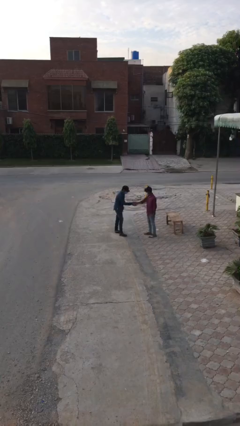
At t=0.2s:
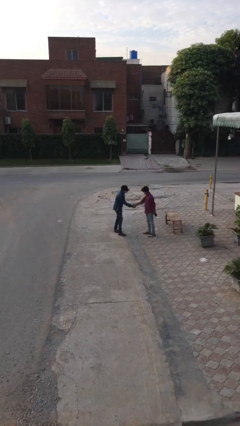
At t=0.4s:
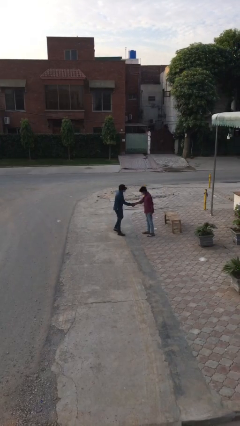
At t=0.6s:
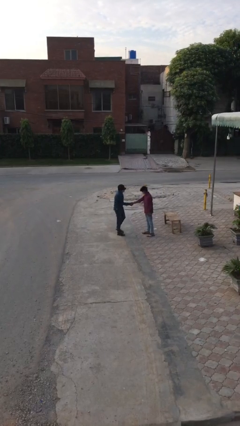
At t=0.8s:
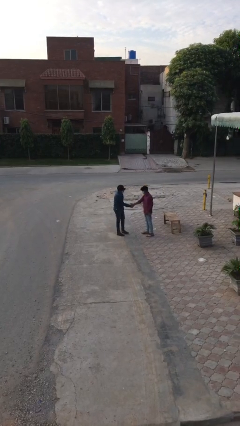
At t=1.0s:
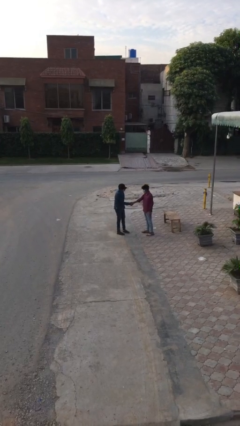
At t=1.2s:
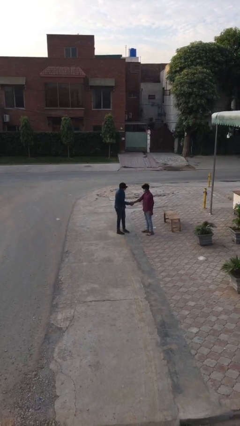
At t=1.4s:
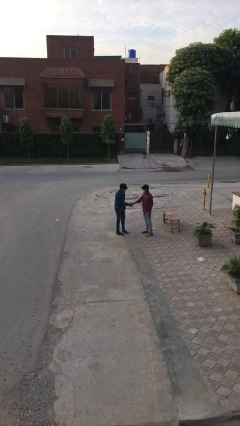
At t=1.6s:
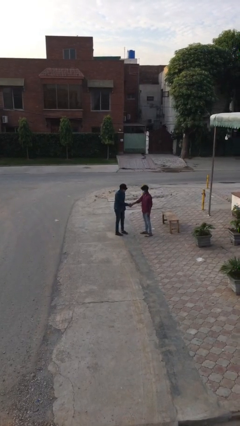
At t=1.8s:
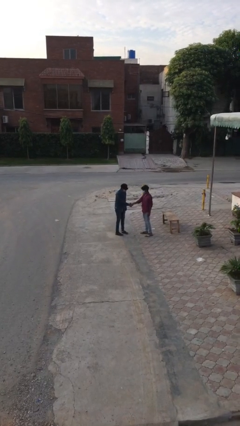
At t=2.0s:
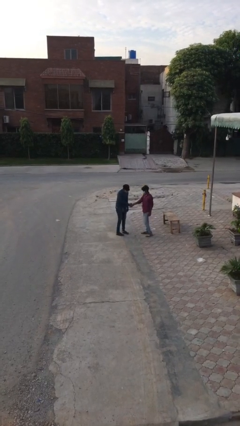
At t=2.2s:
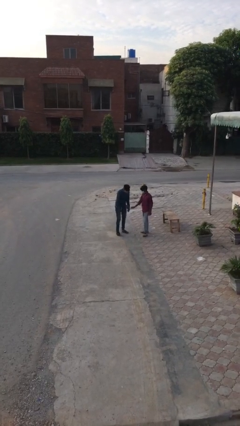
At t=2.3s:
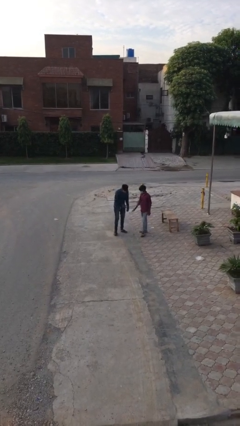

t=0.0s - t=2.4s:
person shakes hand

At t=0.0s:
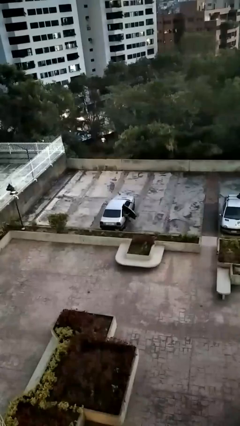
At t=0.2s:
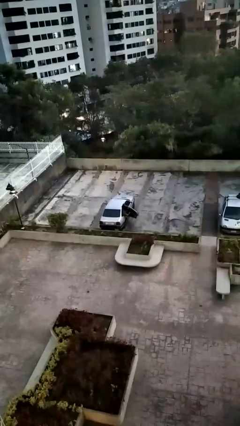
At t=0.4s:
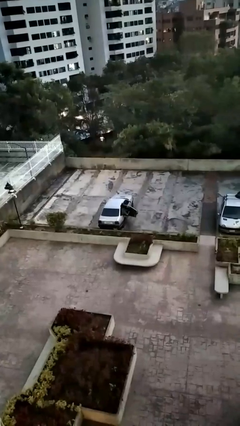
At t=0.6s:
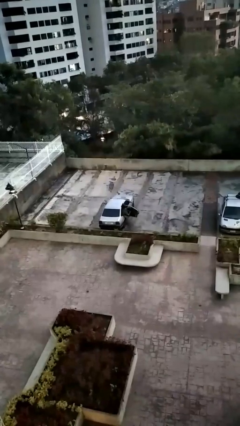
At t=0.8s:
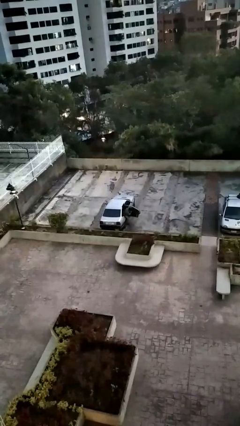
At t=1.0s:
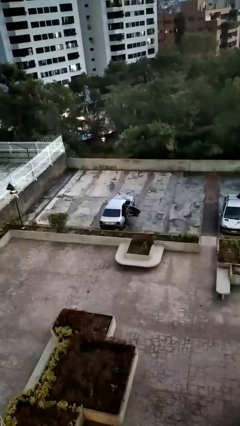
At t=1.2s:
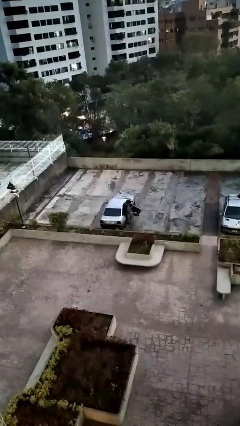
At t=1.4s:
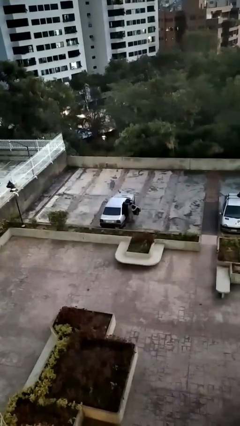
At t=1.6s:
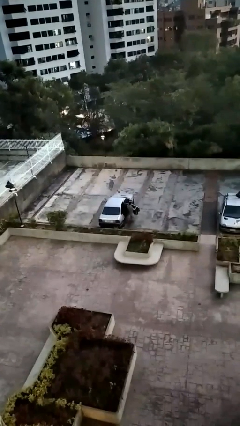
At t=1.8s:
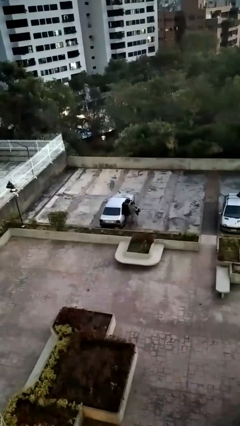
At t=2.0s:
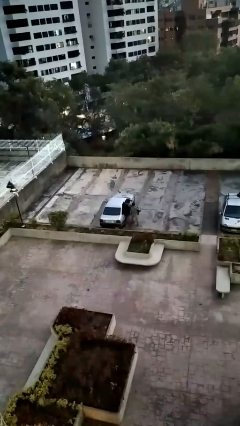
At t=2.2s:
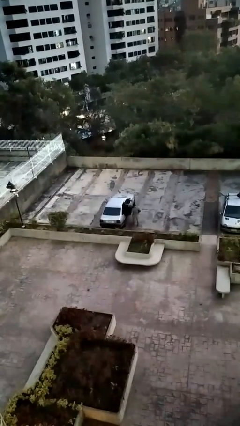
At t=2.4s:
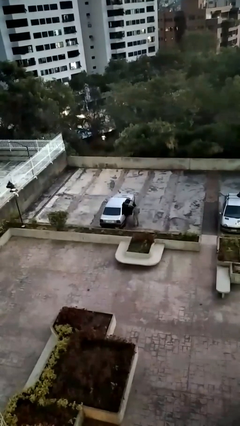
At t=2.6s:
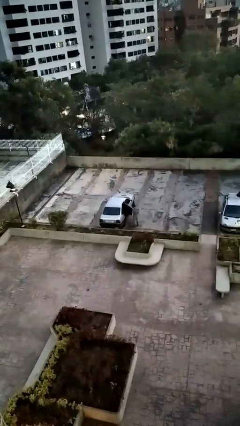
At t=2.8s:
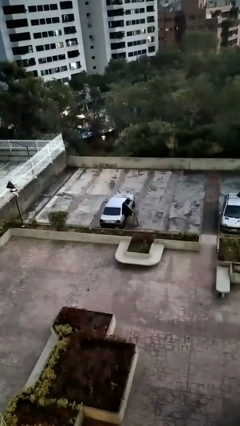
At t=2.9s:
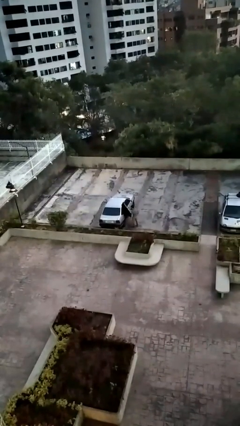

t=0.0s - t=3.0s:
car drops off person

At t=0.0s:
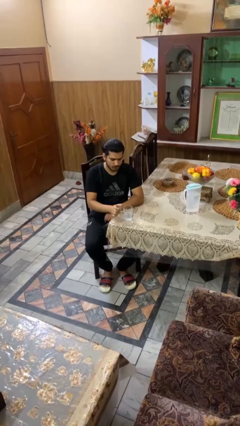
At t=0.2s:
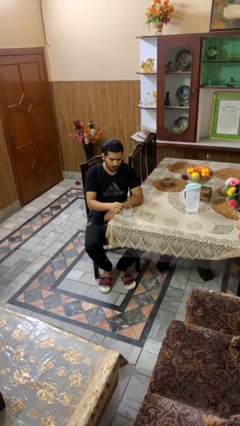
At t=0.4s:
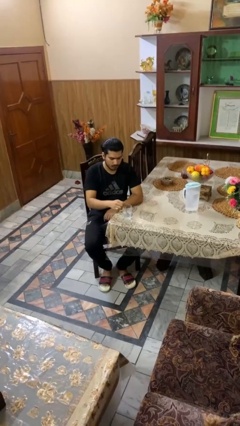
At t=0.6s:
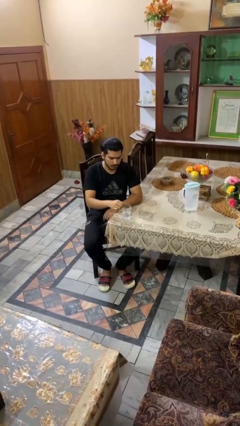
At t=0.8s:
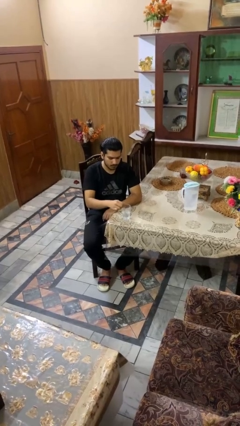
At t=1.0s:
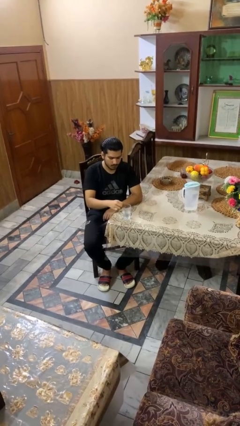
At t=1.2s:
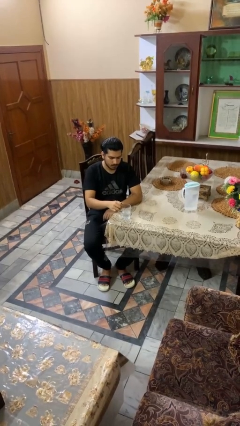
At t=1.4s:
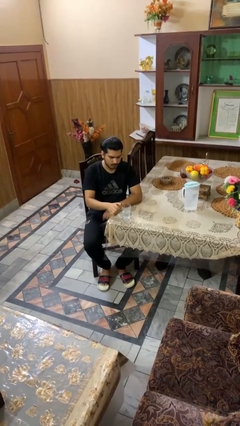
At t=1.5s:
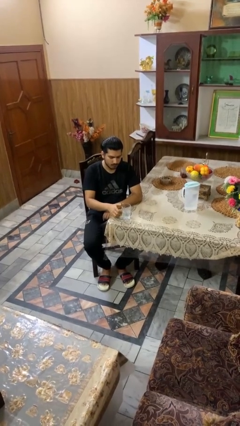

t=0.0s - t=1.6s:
person stirs mug

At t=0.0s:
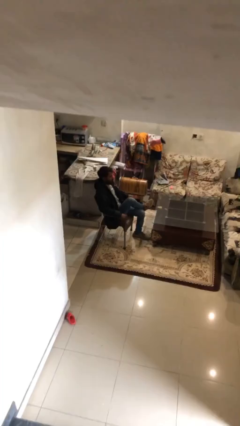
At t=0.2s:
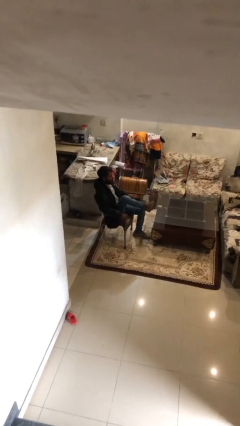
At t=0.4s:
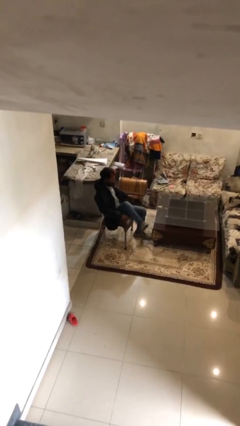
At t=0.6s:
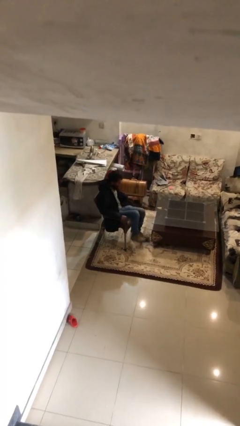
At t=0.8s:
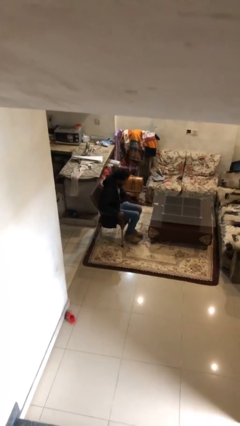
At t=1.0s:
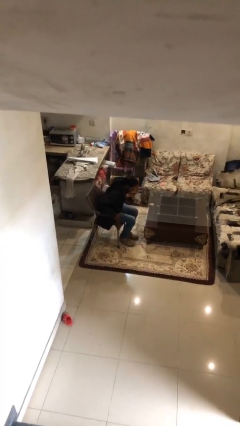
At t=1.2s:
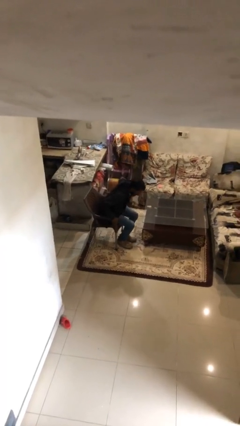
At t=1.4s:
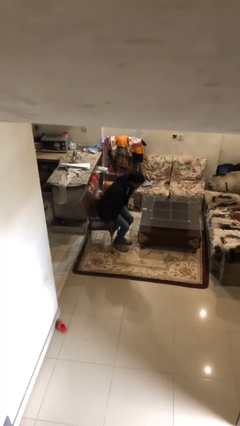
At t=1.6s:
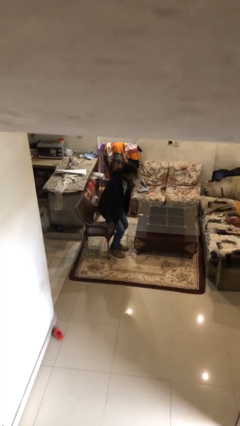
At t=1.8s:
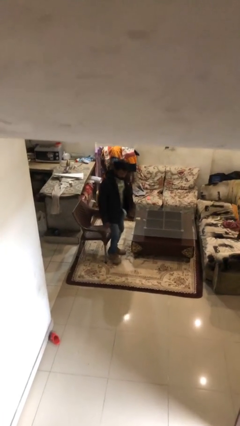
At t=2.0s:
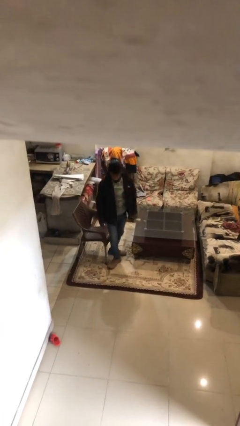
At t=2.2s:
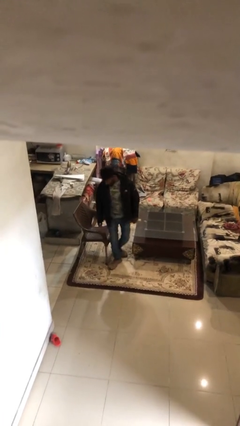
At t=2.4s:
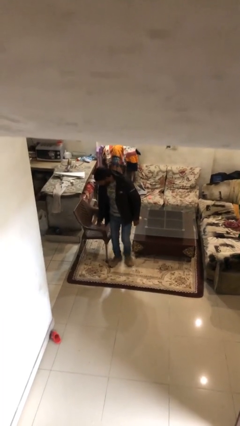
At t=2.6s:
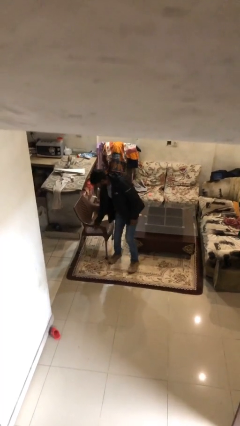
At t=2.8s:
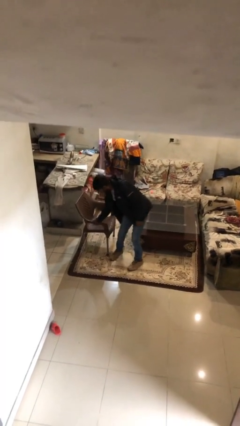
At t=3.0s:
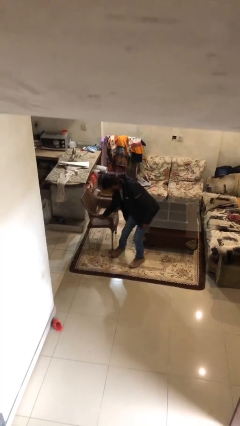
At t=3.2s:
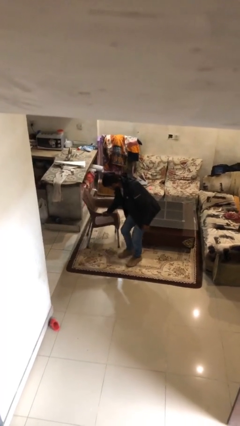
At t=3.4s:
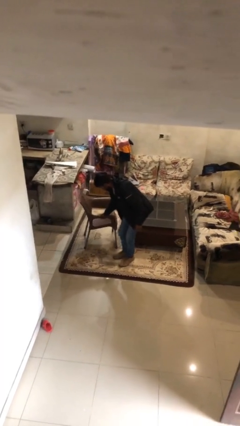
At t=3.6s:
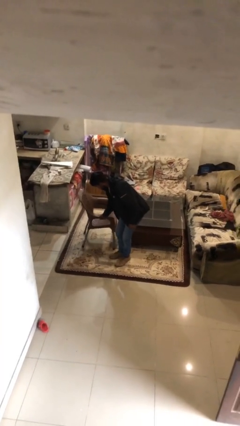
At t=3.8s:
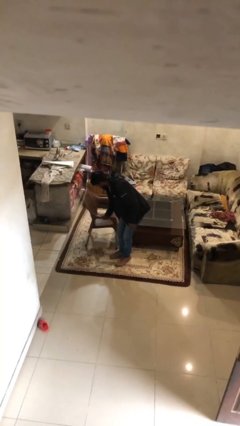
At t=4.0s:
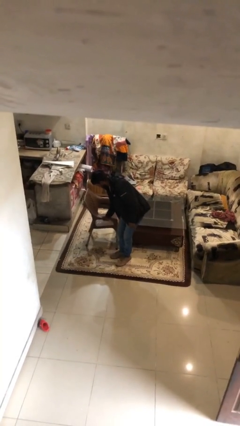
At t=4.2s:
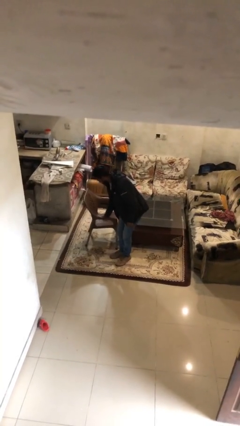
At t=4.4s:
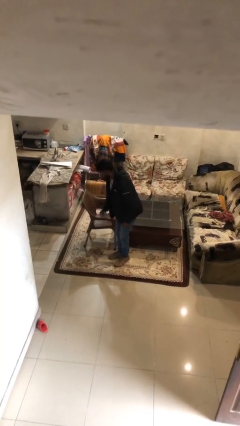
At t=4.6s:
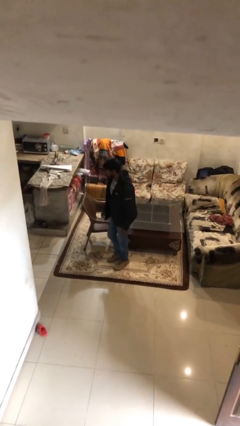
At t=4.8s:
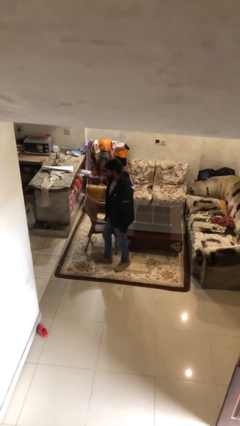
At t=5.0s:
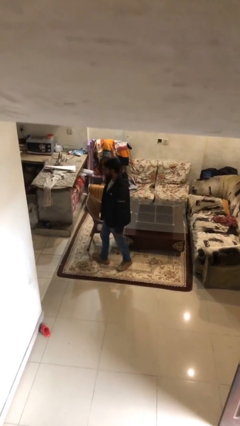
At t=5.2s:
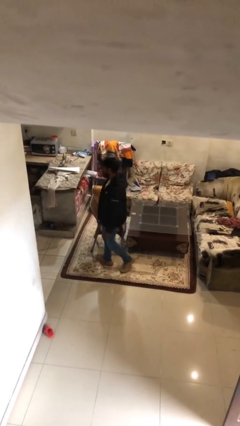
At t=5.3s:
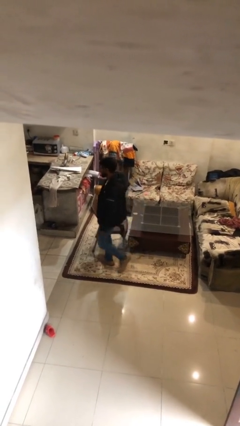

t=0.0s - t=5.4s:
person stands up

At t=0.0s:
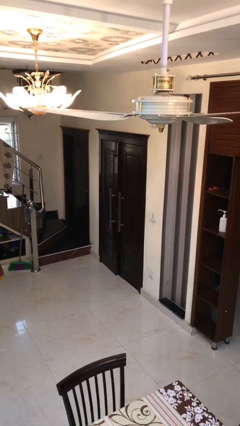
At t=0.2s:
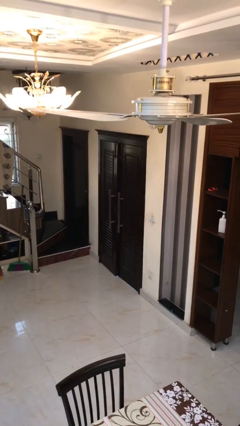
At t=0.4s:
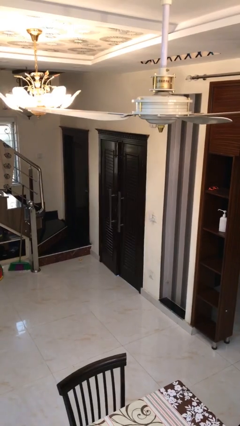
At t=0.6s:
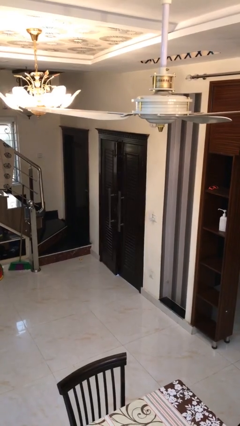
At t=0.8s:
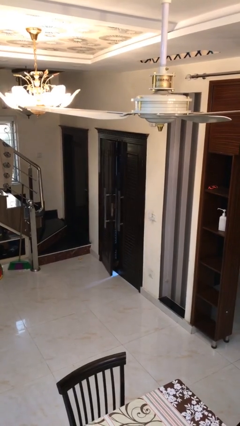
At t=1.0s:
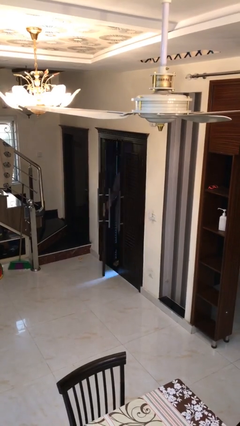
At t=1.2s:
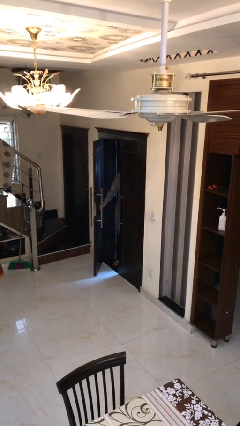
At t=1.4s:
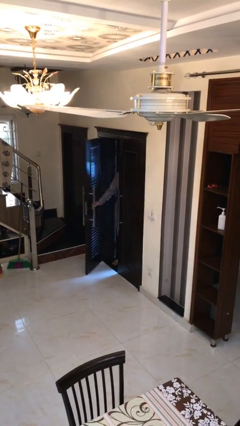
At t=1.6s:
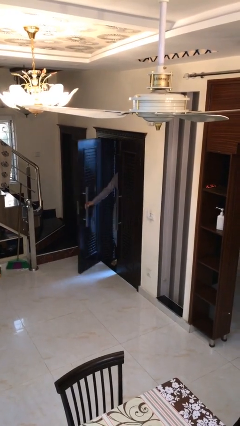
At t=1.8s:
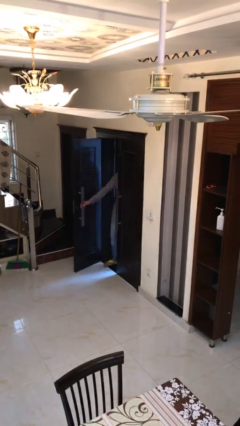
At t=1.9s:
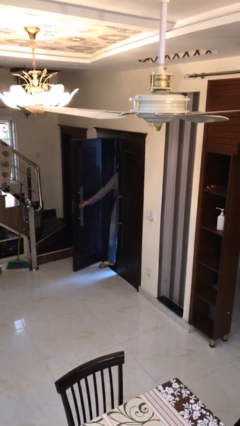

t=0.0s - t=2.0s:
person opens facility door

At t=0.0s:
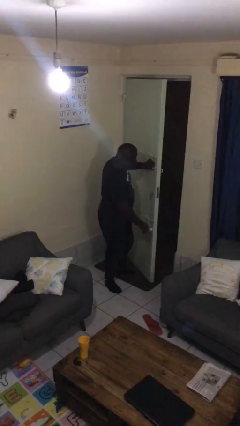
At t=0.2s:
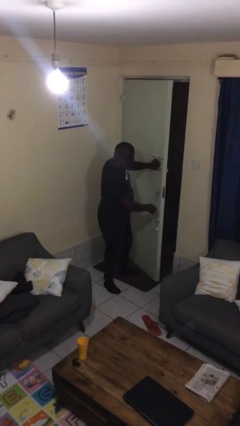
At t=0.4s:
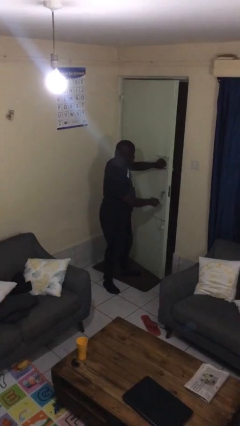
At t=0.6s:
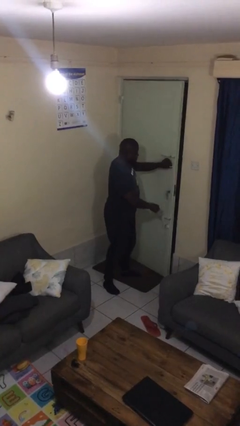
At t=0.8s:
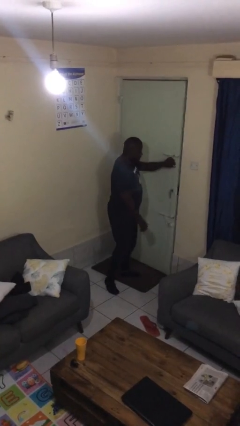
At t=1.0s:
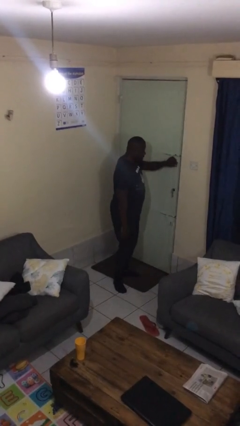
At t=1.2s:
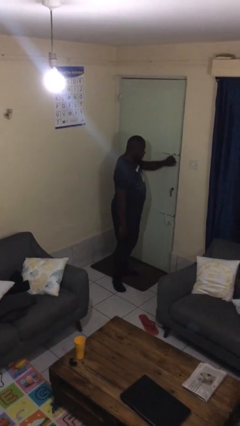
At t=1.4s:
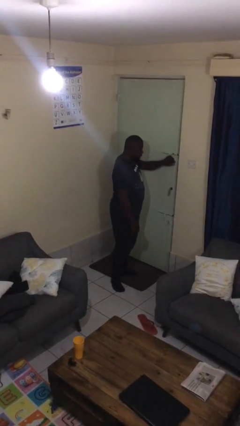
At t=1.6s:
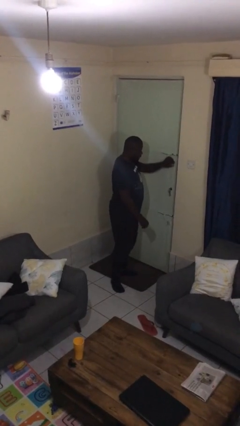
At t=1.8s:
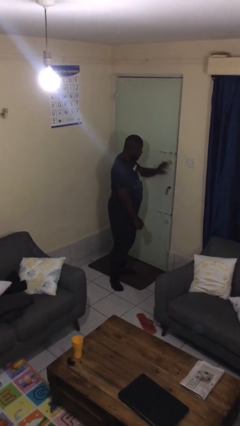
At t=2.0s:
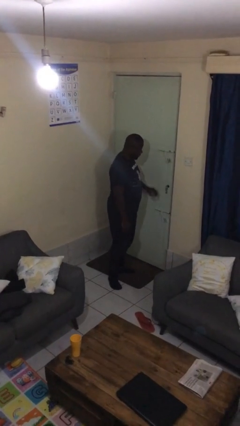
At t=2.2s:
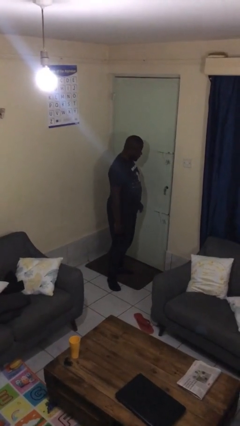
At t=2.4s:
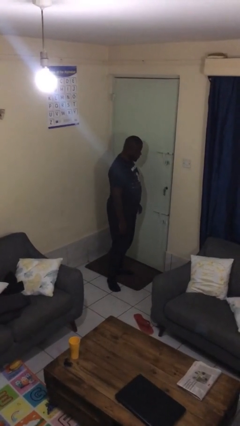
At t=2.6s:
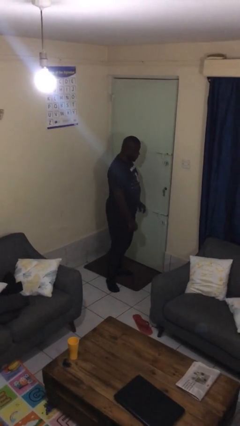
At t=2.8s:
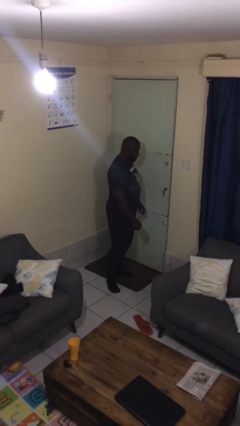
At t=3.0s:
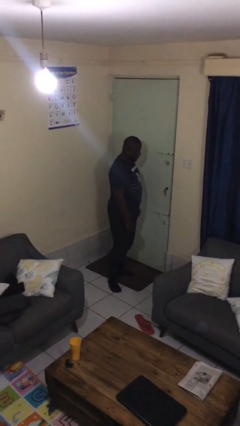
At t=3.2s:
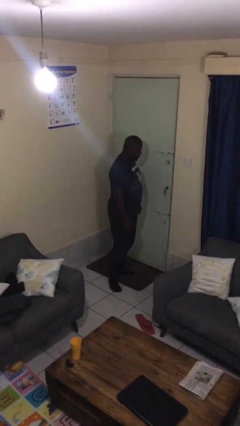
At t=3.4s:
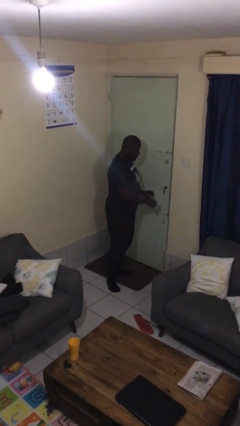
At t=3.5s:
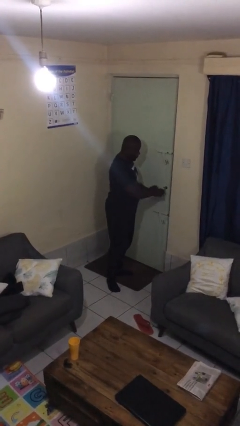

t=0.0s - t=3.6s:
person closes facility door
